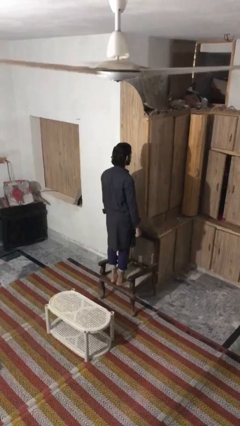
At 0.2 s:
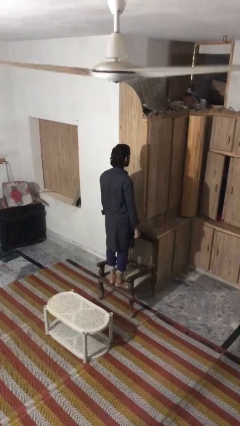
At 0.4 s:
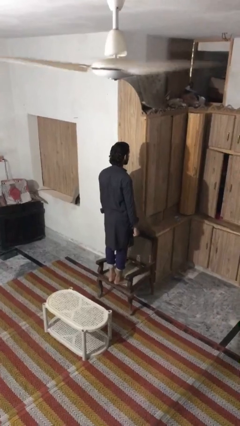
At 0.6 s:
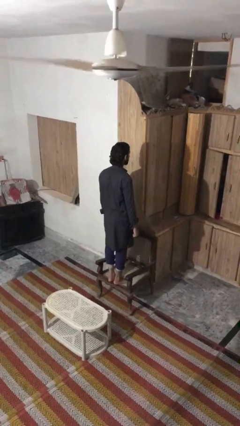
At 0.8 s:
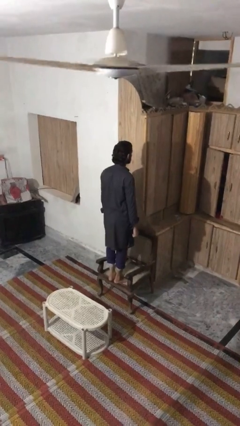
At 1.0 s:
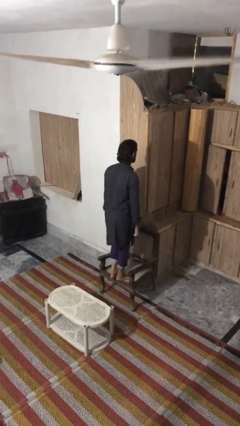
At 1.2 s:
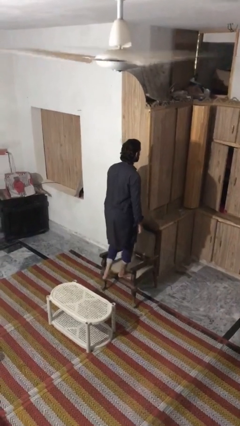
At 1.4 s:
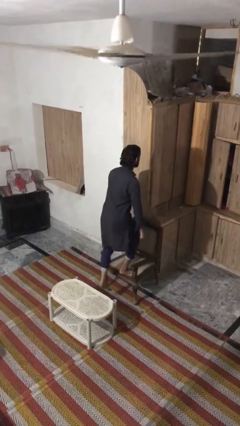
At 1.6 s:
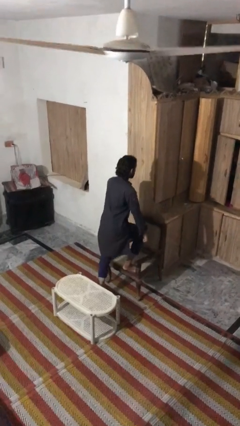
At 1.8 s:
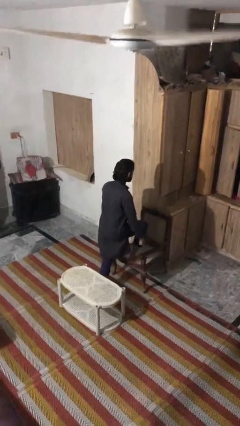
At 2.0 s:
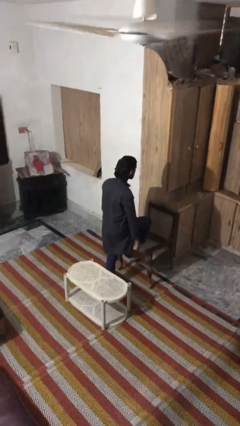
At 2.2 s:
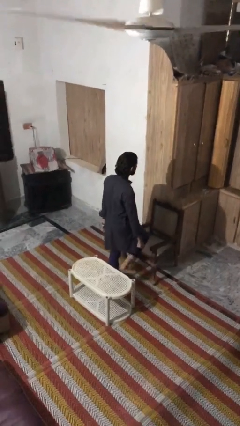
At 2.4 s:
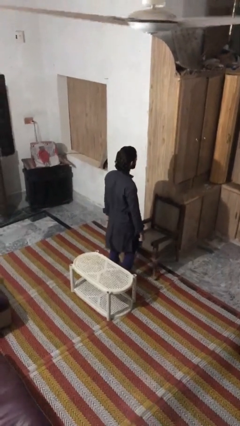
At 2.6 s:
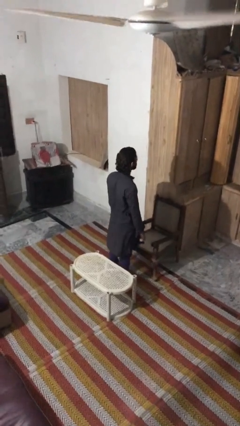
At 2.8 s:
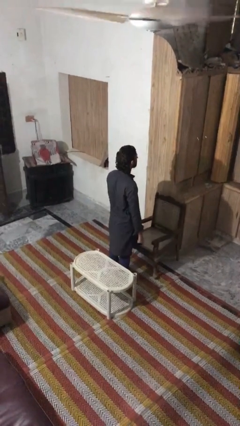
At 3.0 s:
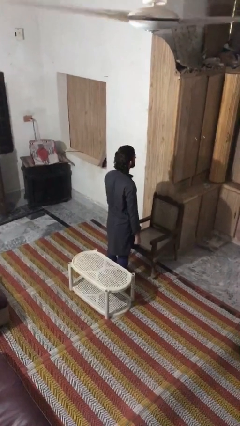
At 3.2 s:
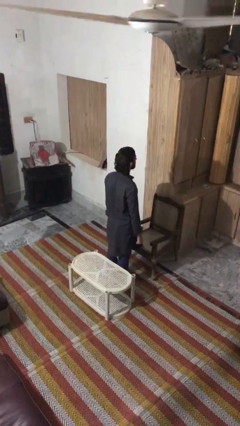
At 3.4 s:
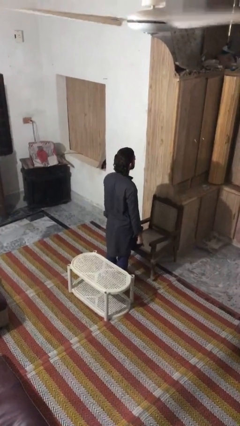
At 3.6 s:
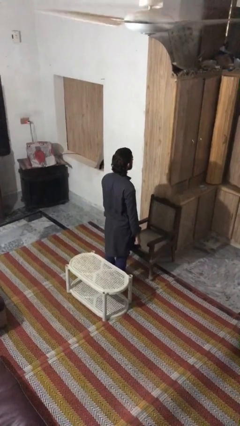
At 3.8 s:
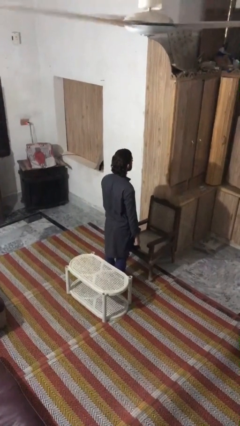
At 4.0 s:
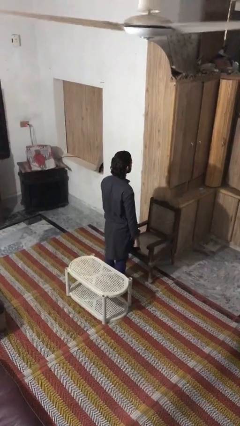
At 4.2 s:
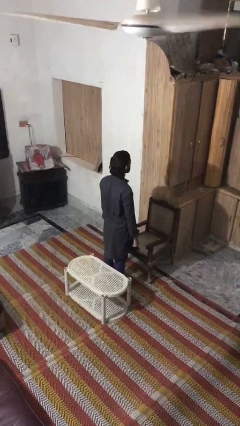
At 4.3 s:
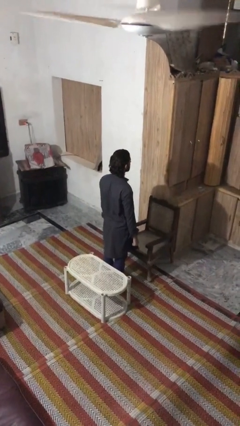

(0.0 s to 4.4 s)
person climbs off chair

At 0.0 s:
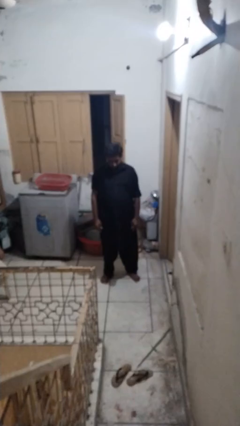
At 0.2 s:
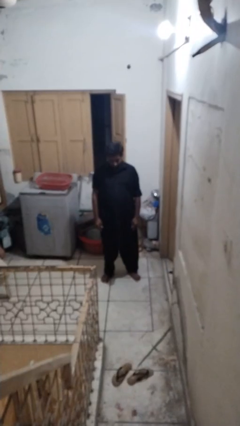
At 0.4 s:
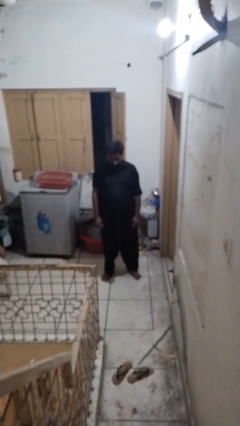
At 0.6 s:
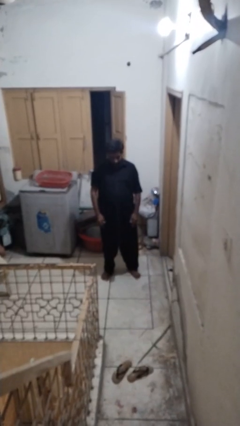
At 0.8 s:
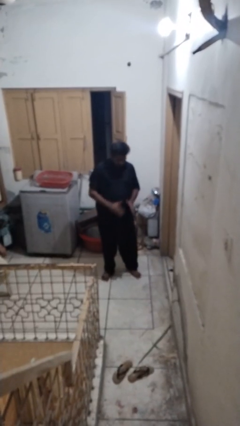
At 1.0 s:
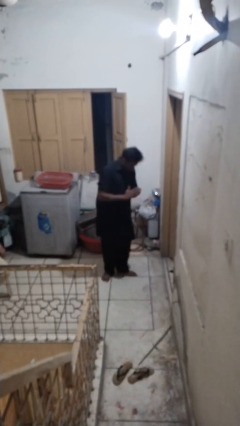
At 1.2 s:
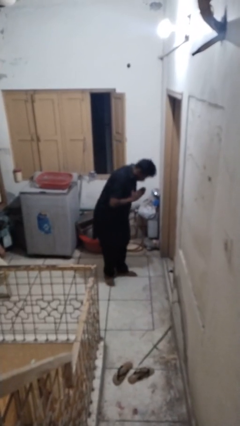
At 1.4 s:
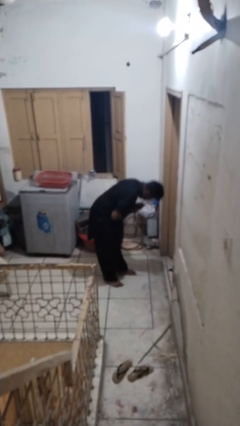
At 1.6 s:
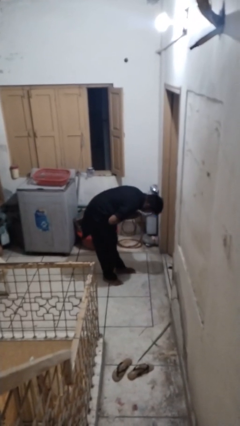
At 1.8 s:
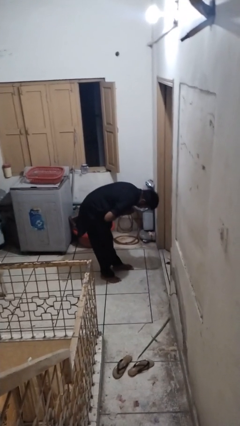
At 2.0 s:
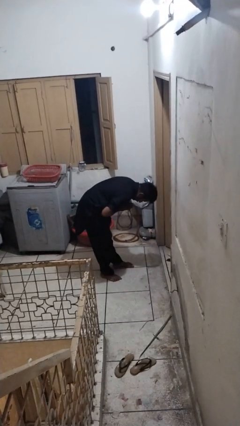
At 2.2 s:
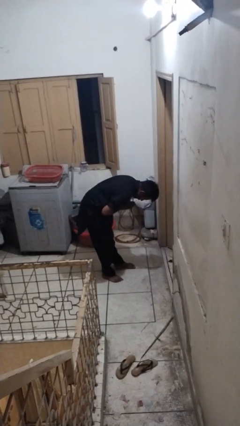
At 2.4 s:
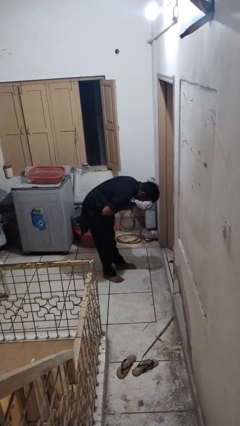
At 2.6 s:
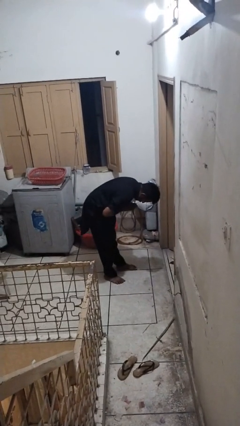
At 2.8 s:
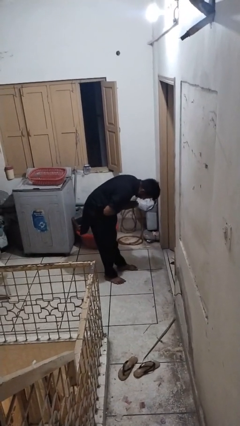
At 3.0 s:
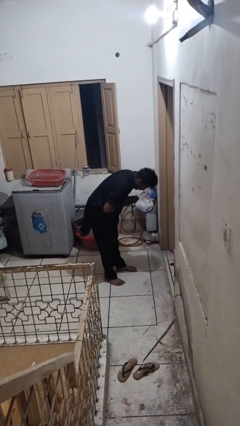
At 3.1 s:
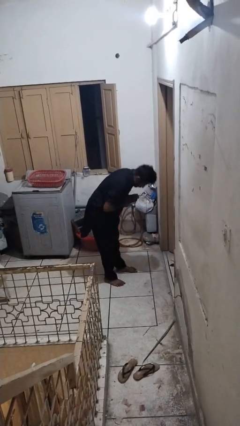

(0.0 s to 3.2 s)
person bows

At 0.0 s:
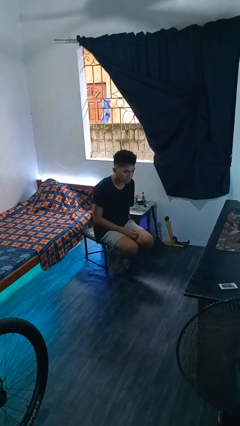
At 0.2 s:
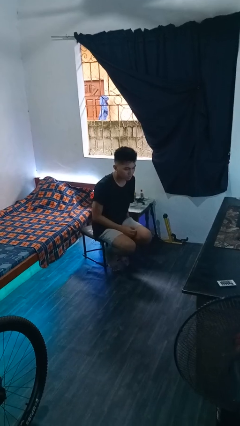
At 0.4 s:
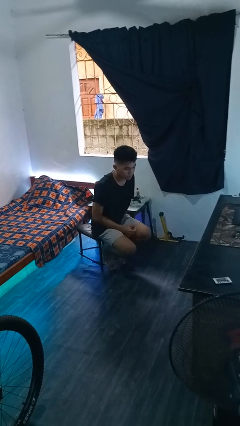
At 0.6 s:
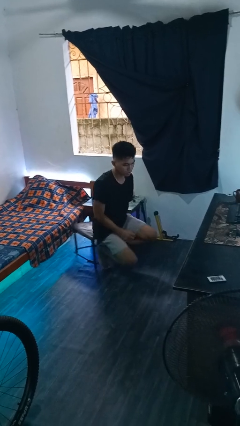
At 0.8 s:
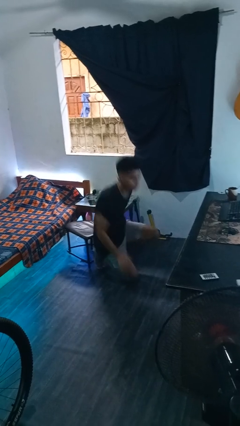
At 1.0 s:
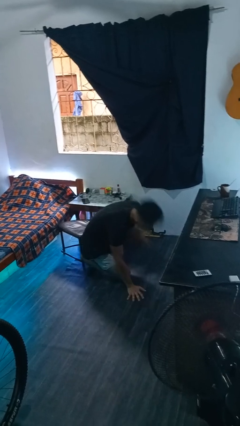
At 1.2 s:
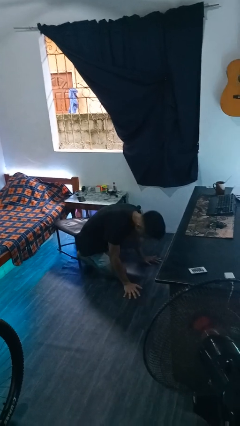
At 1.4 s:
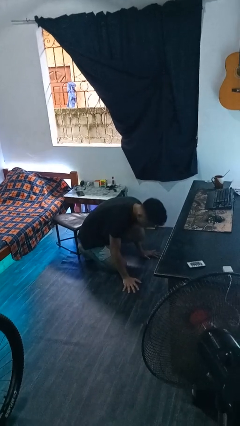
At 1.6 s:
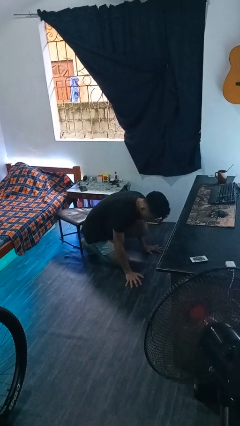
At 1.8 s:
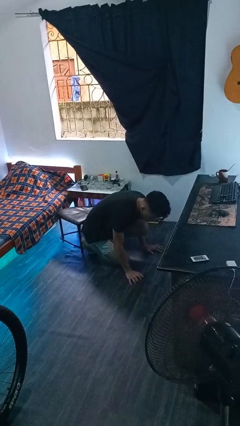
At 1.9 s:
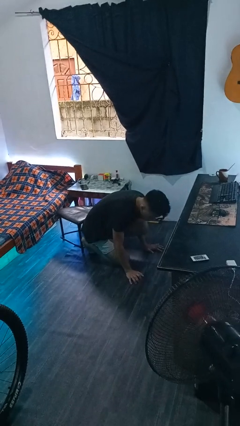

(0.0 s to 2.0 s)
person falls from chair

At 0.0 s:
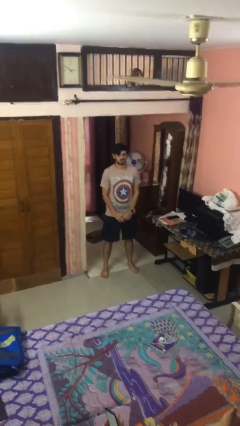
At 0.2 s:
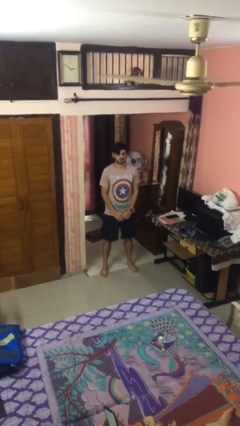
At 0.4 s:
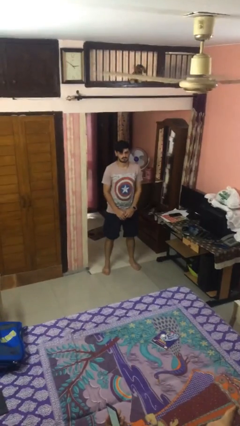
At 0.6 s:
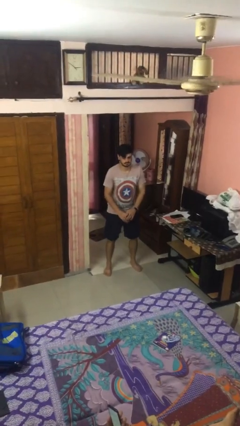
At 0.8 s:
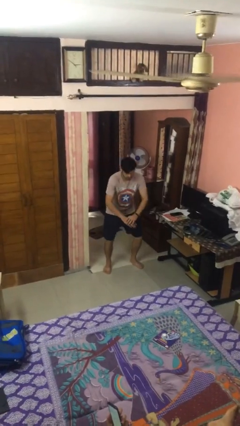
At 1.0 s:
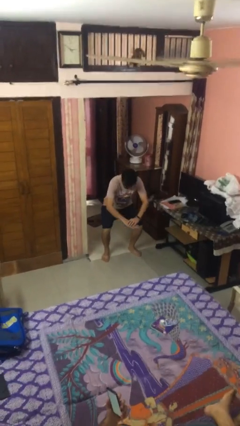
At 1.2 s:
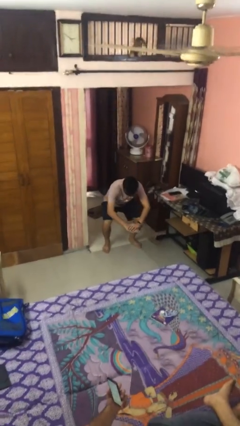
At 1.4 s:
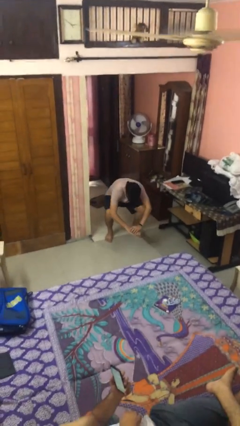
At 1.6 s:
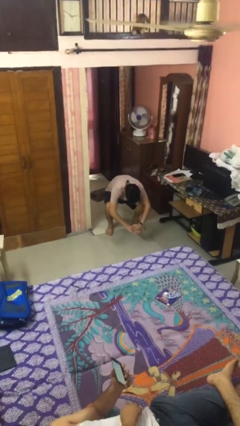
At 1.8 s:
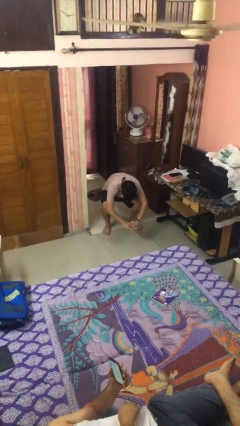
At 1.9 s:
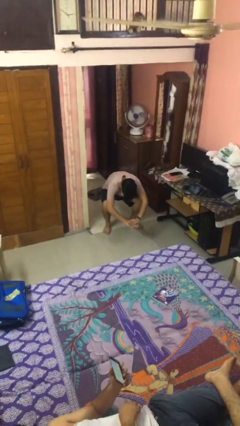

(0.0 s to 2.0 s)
person squats

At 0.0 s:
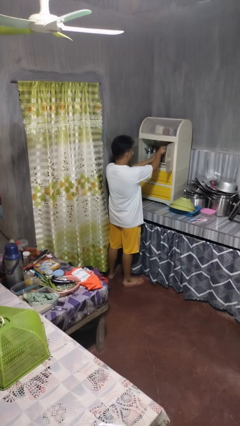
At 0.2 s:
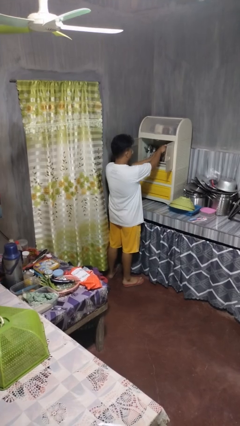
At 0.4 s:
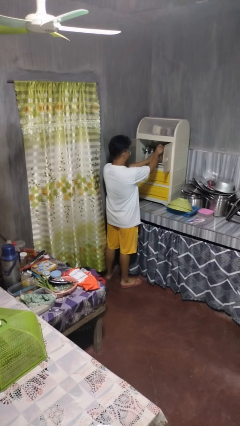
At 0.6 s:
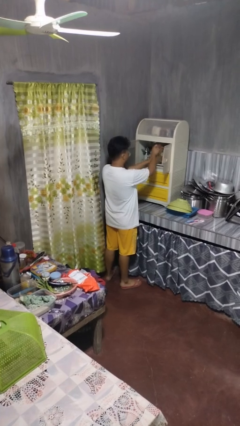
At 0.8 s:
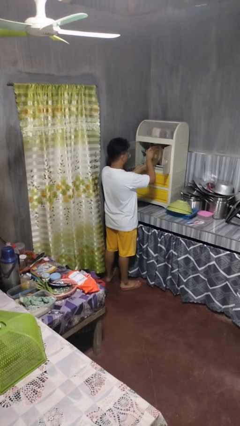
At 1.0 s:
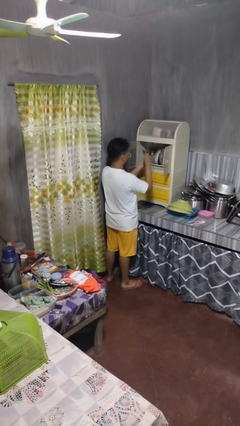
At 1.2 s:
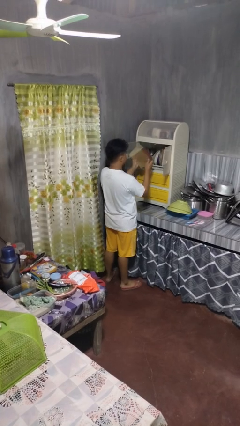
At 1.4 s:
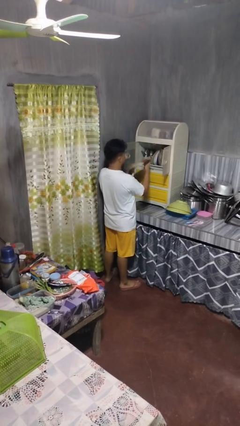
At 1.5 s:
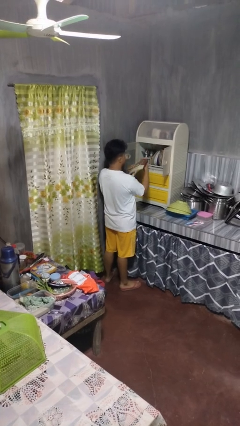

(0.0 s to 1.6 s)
person takes object from cabinet

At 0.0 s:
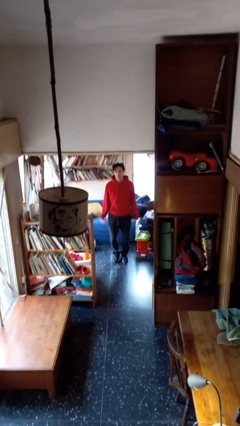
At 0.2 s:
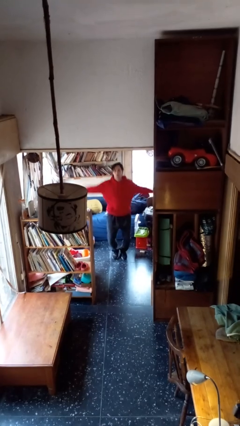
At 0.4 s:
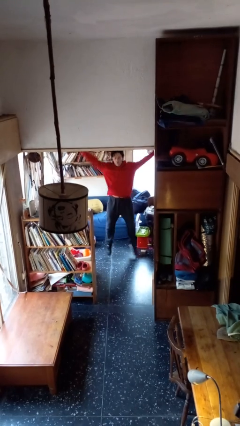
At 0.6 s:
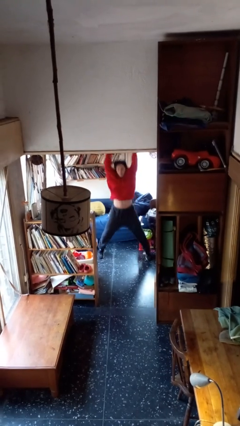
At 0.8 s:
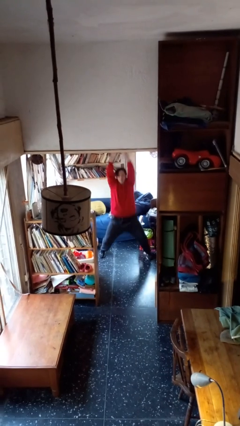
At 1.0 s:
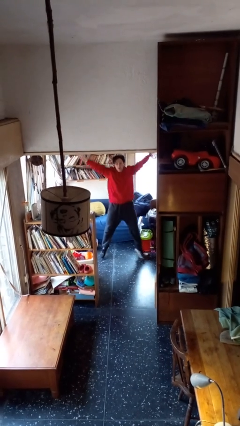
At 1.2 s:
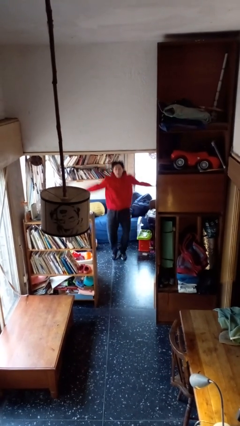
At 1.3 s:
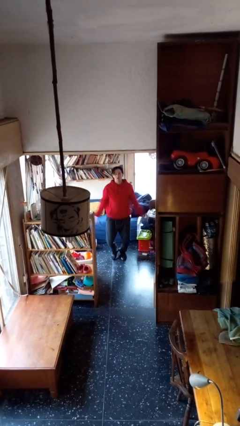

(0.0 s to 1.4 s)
person exercises with jumping jacks

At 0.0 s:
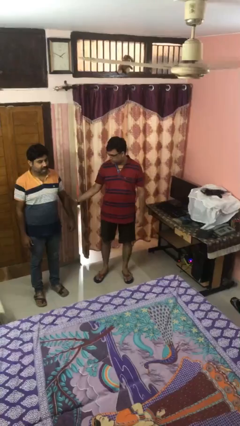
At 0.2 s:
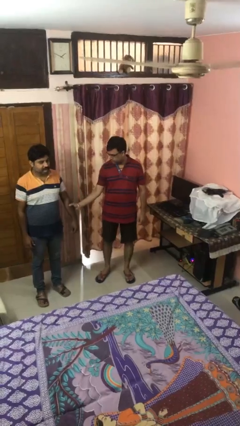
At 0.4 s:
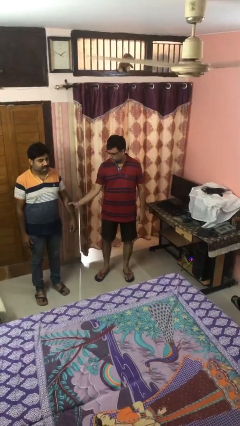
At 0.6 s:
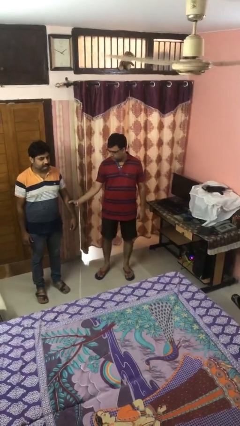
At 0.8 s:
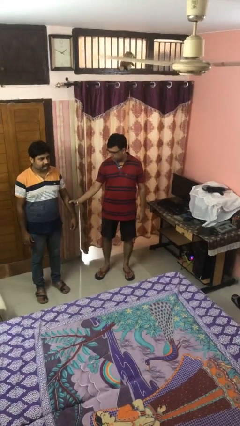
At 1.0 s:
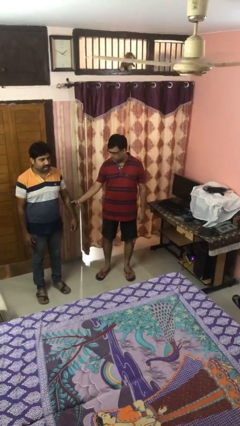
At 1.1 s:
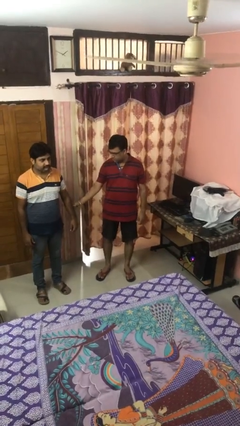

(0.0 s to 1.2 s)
person grabs person by forearm

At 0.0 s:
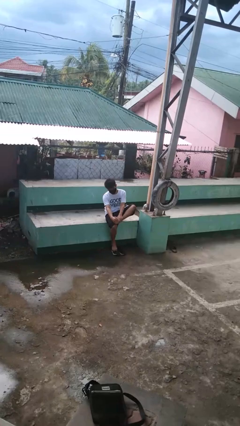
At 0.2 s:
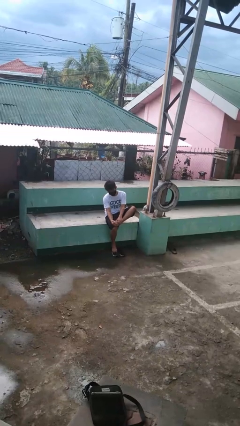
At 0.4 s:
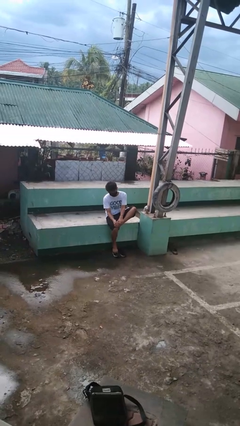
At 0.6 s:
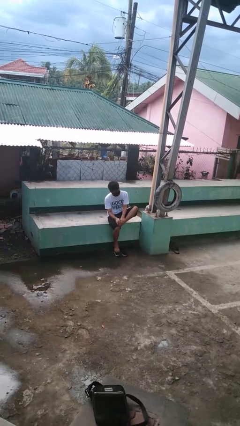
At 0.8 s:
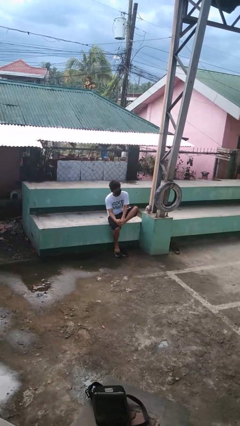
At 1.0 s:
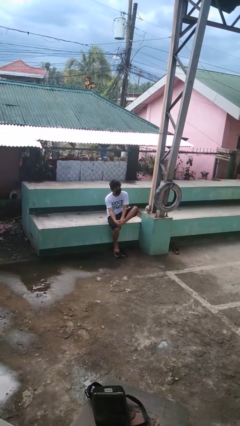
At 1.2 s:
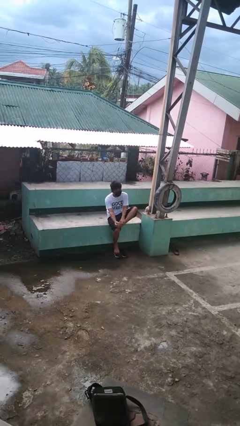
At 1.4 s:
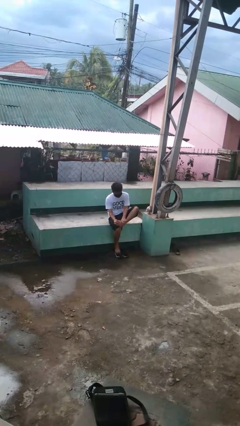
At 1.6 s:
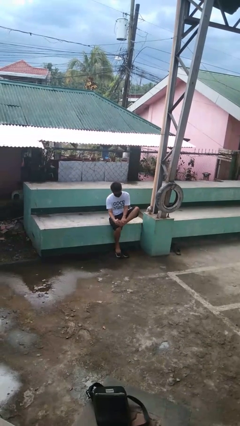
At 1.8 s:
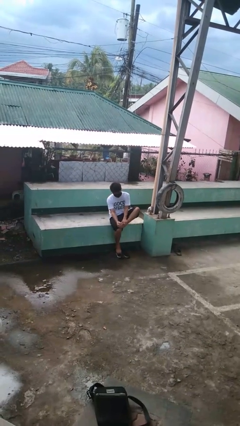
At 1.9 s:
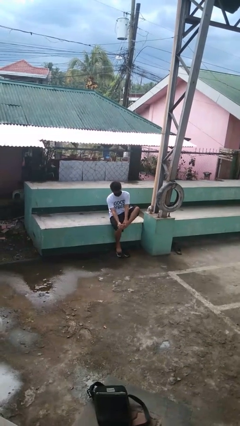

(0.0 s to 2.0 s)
person rubs foot
